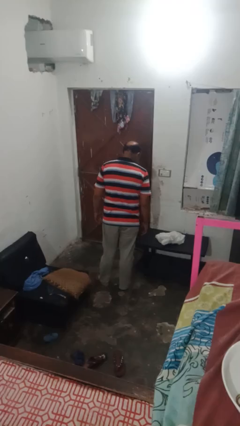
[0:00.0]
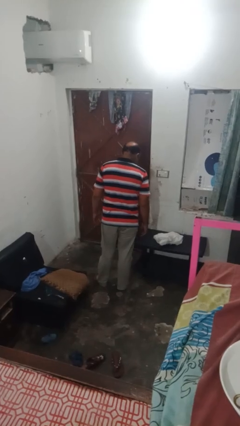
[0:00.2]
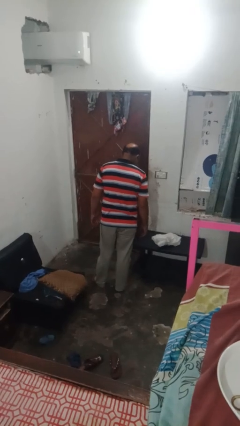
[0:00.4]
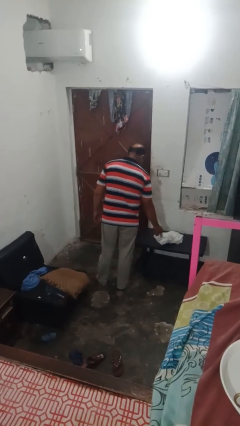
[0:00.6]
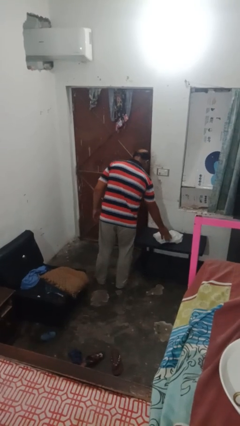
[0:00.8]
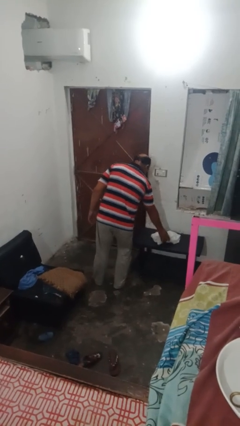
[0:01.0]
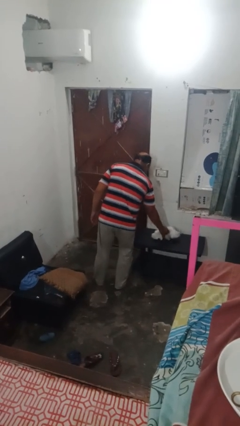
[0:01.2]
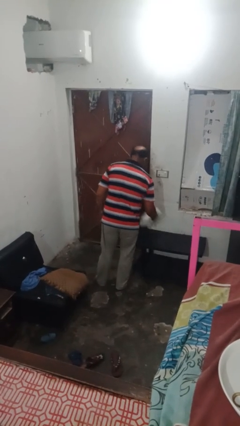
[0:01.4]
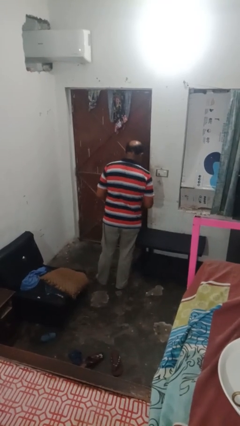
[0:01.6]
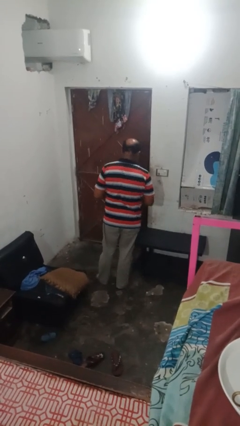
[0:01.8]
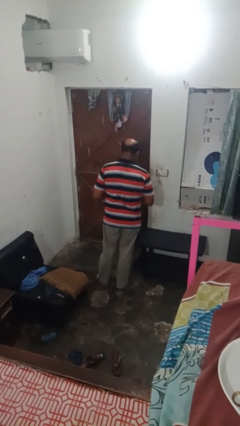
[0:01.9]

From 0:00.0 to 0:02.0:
person picks up object from table

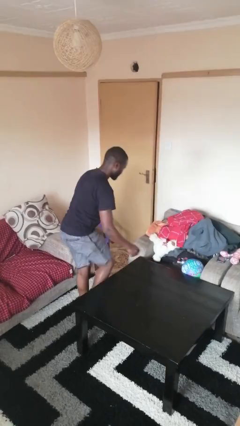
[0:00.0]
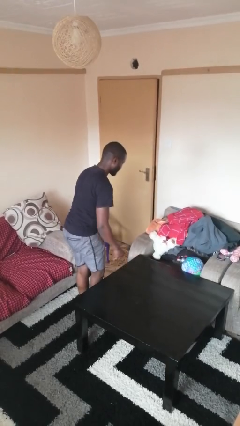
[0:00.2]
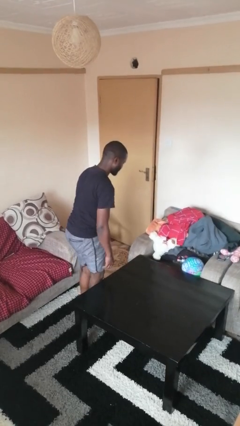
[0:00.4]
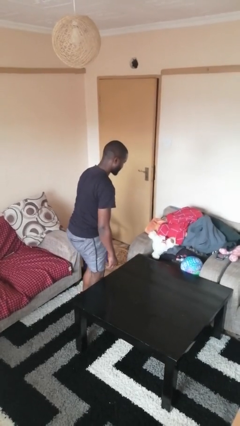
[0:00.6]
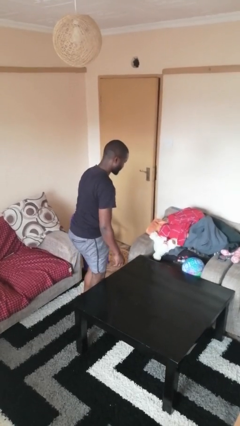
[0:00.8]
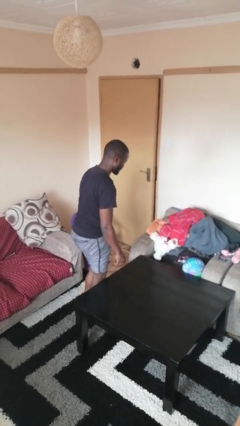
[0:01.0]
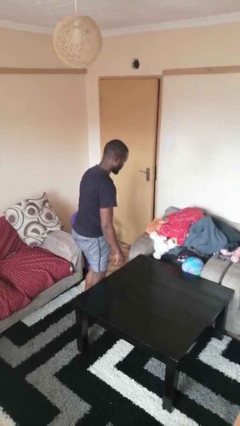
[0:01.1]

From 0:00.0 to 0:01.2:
person climbs off table

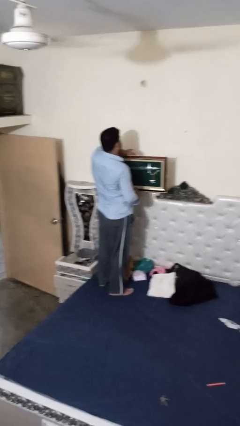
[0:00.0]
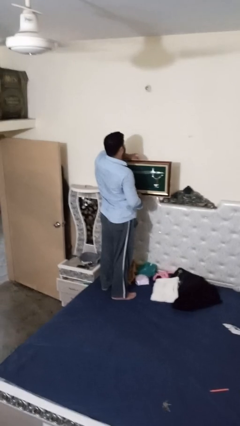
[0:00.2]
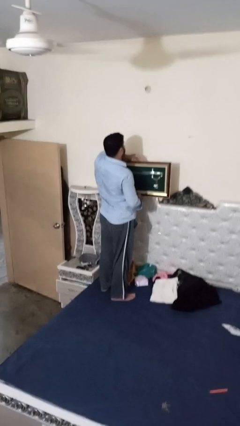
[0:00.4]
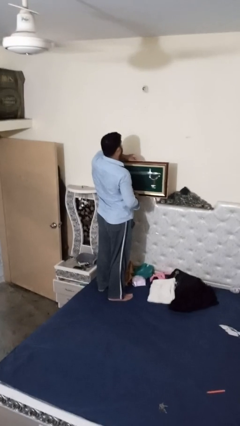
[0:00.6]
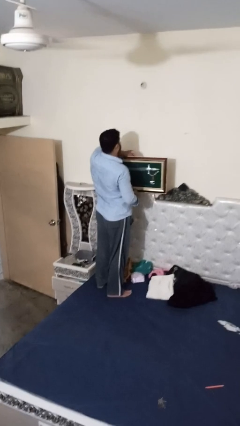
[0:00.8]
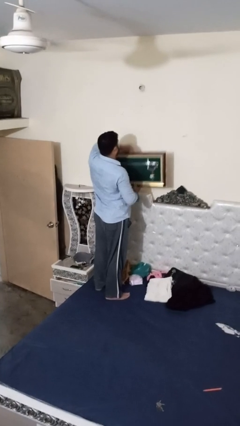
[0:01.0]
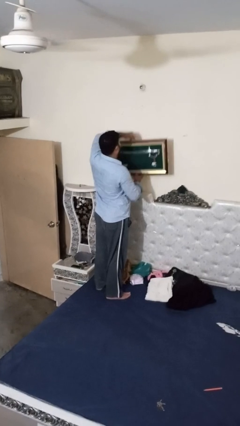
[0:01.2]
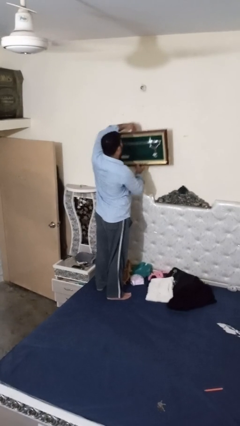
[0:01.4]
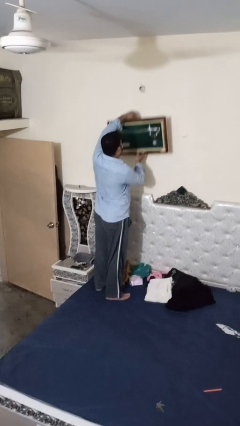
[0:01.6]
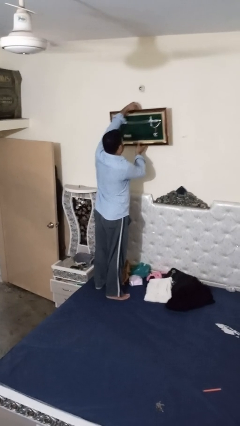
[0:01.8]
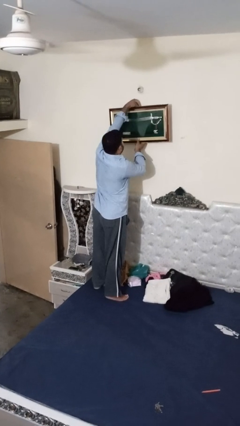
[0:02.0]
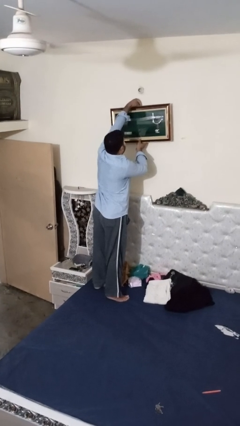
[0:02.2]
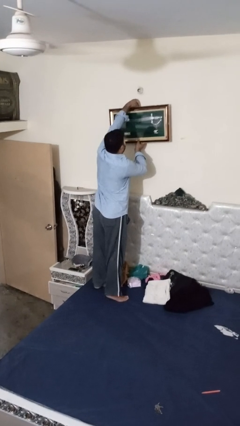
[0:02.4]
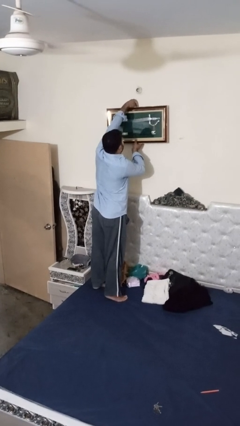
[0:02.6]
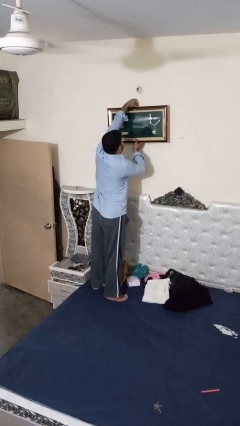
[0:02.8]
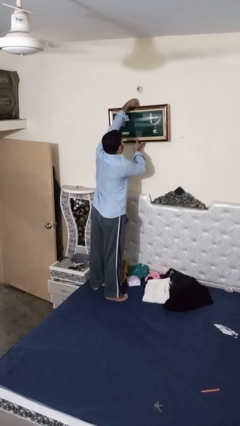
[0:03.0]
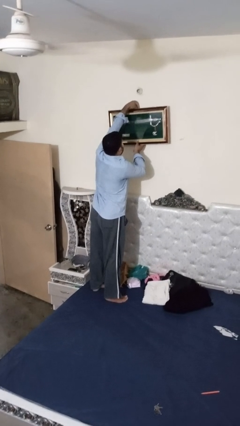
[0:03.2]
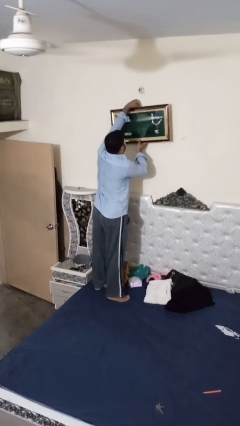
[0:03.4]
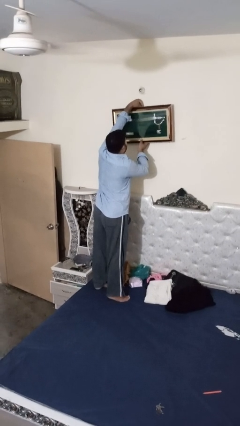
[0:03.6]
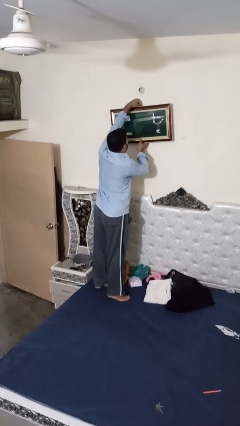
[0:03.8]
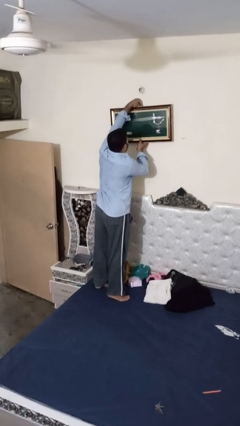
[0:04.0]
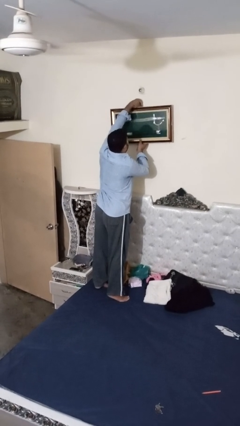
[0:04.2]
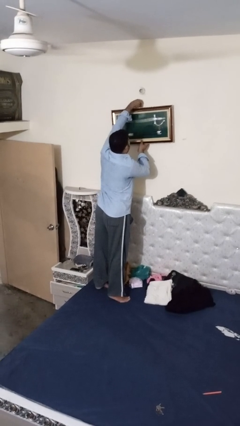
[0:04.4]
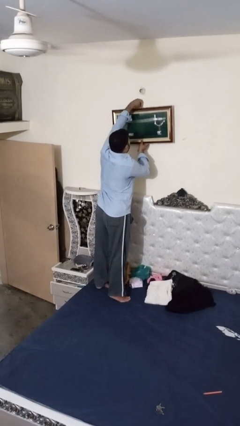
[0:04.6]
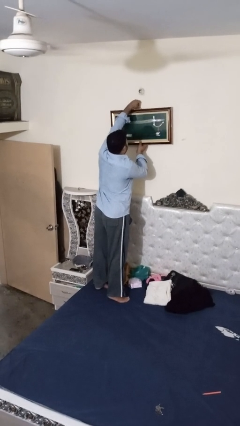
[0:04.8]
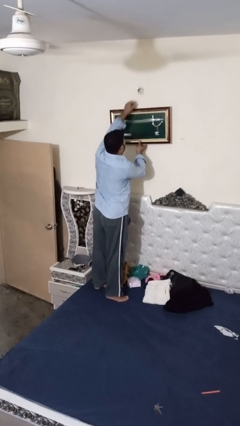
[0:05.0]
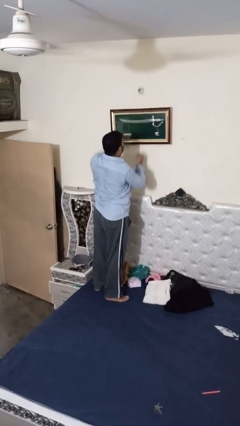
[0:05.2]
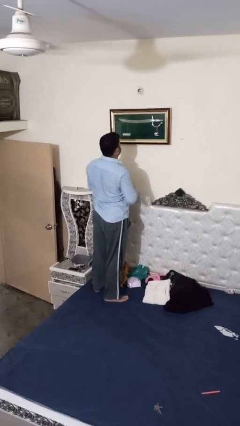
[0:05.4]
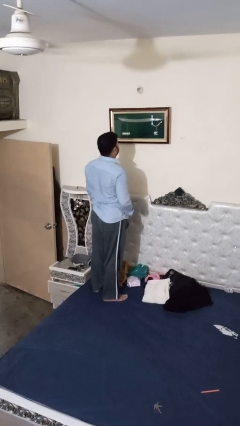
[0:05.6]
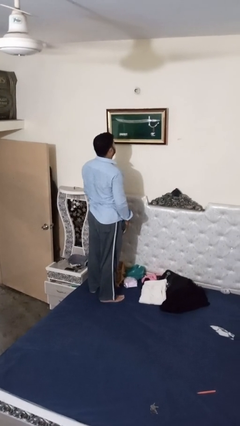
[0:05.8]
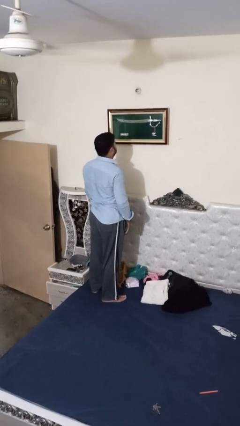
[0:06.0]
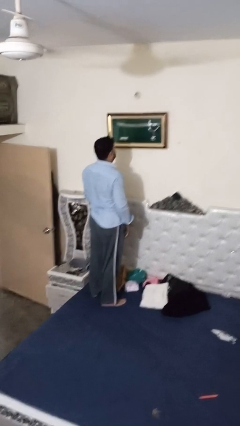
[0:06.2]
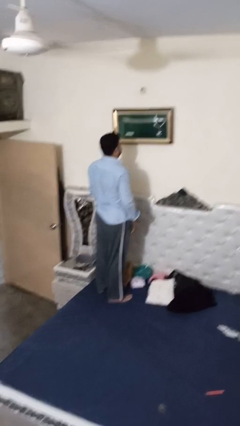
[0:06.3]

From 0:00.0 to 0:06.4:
person puts up picture frame

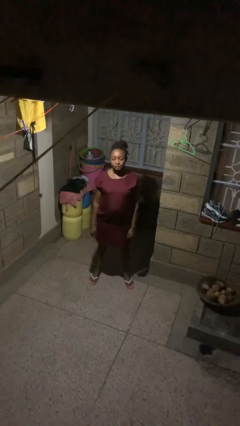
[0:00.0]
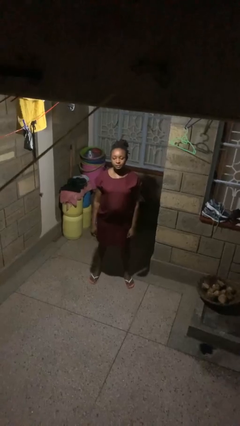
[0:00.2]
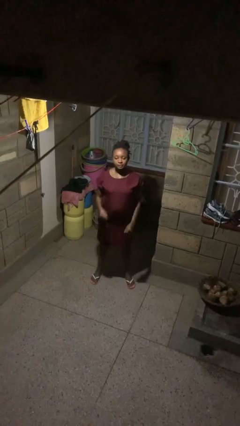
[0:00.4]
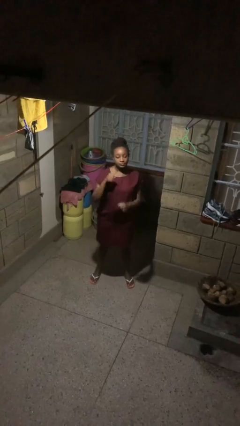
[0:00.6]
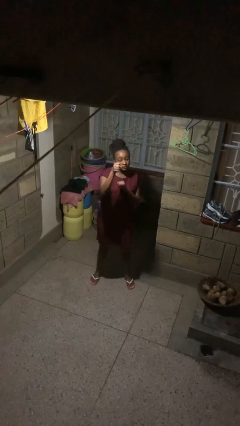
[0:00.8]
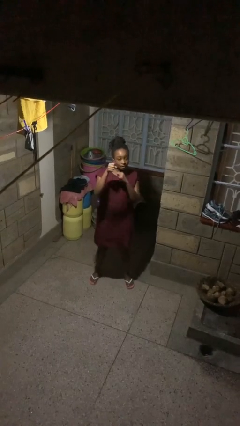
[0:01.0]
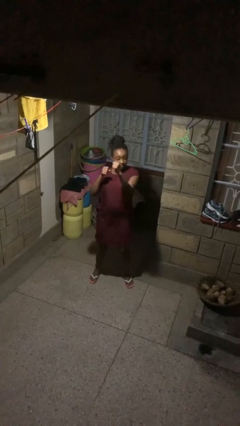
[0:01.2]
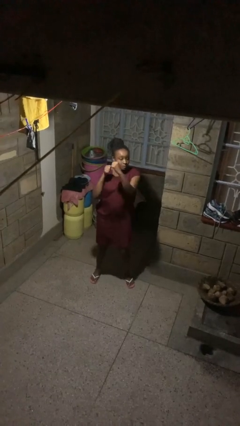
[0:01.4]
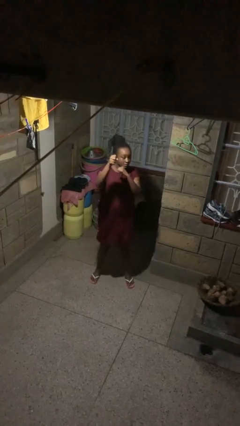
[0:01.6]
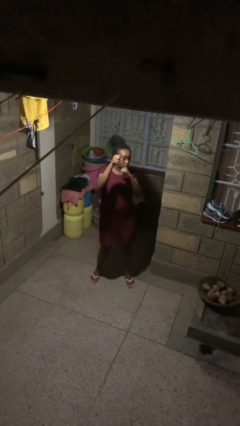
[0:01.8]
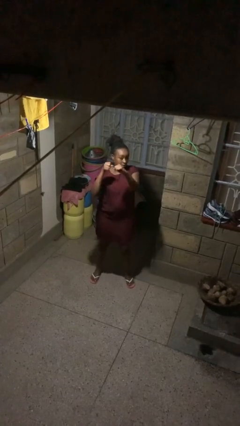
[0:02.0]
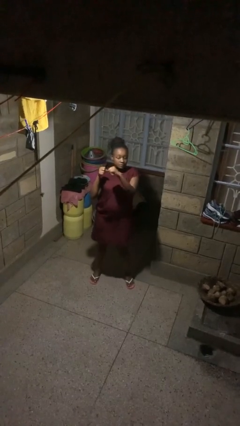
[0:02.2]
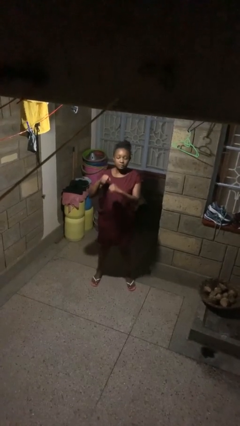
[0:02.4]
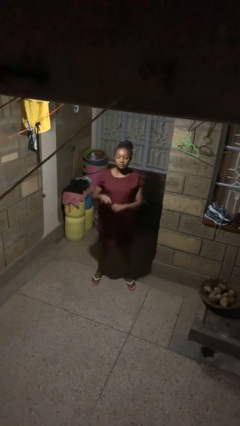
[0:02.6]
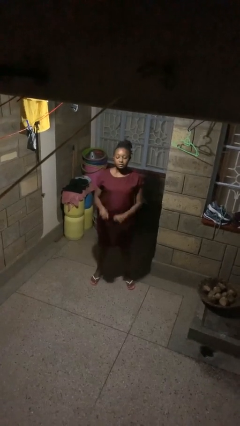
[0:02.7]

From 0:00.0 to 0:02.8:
person punches

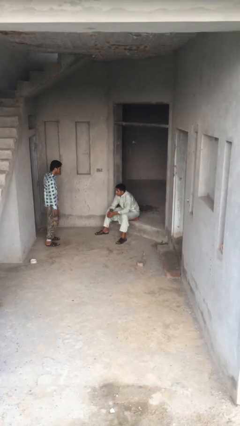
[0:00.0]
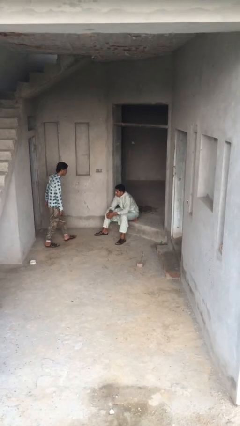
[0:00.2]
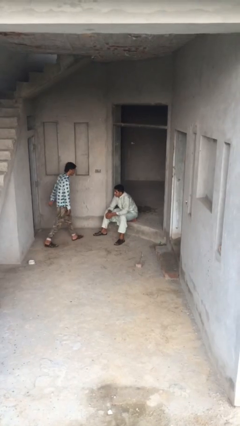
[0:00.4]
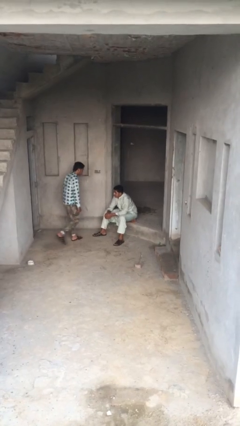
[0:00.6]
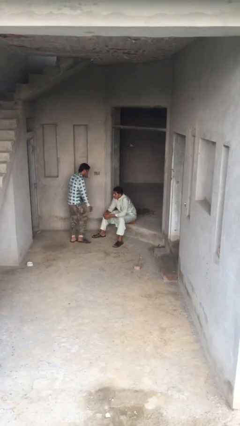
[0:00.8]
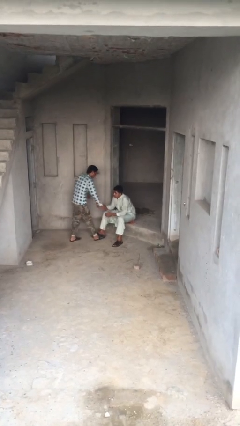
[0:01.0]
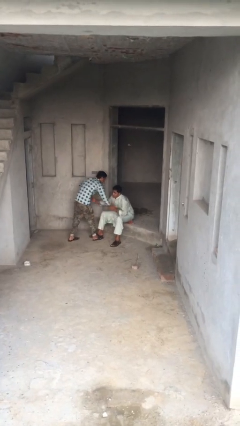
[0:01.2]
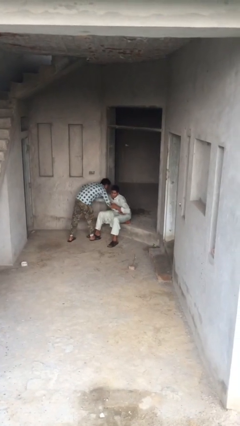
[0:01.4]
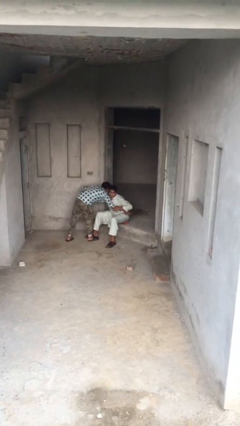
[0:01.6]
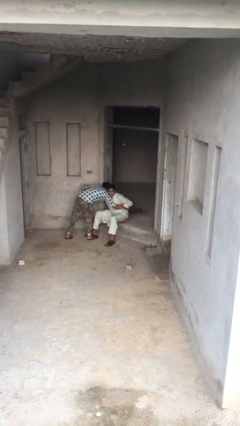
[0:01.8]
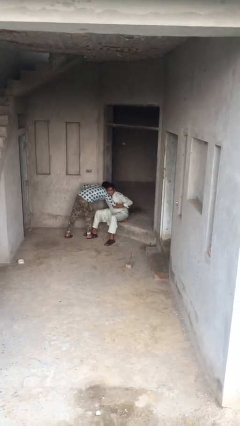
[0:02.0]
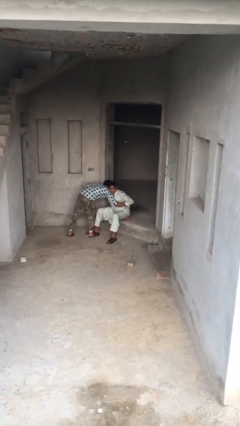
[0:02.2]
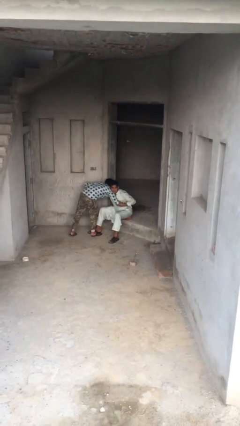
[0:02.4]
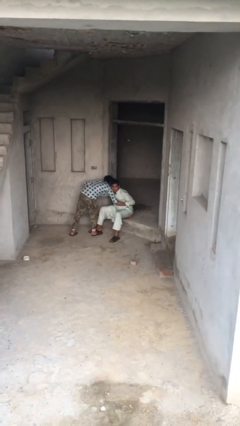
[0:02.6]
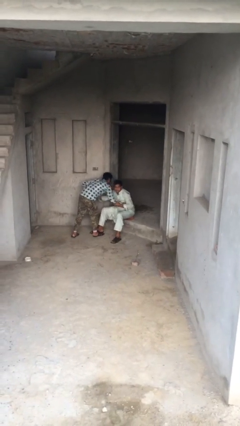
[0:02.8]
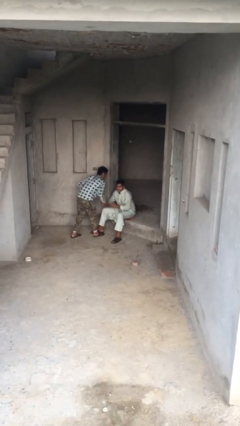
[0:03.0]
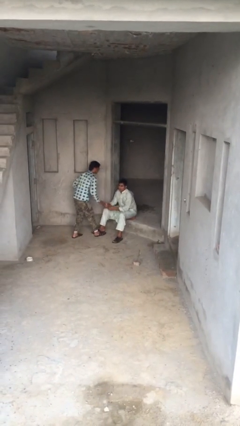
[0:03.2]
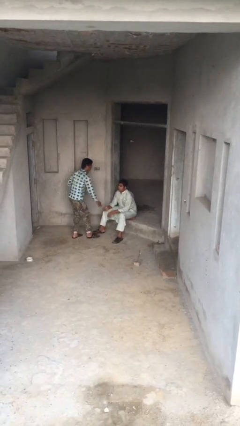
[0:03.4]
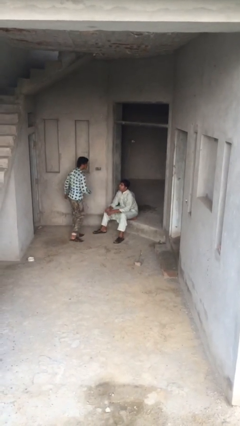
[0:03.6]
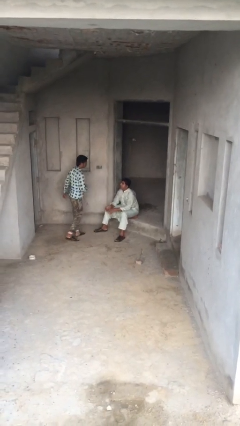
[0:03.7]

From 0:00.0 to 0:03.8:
person embraces person

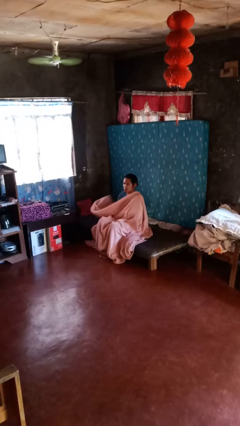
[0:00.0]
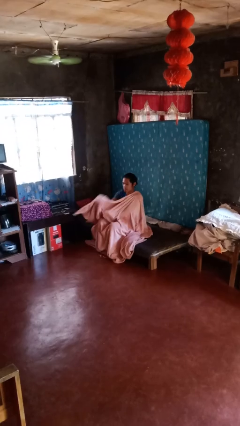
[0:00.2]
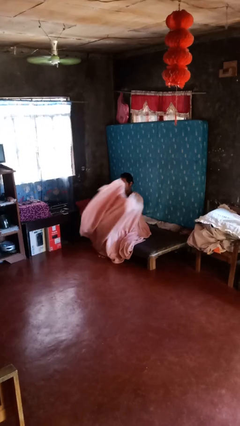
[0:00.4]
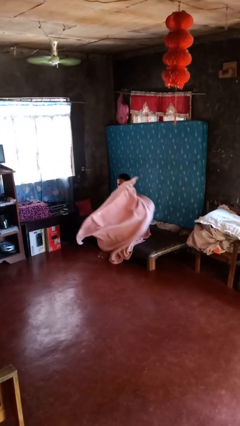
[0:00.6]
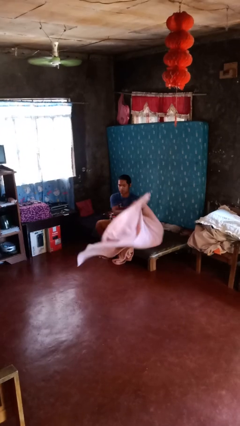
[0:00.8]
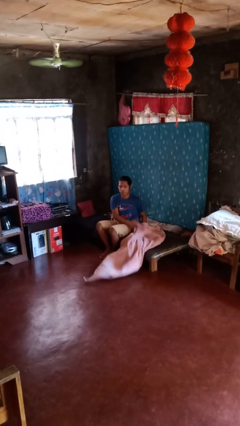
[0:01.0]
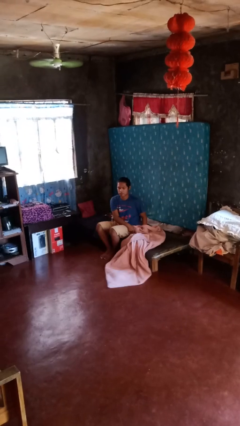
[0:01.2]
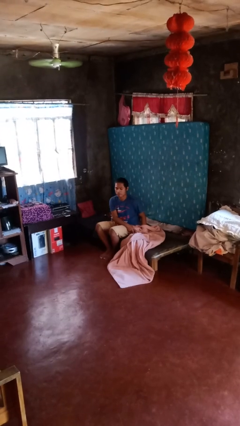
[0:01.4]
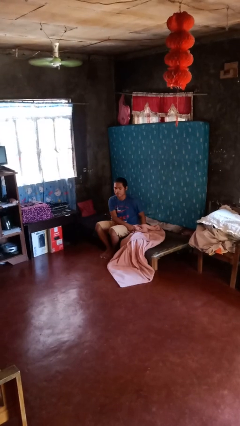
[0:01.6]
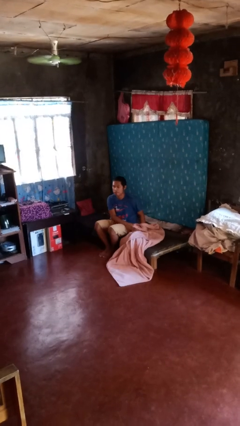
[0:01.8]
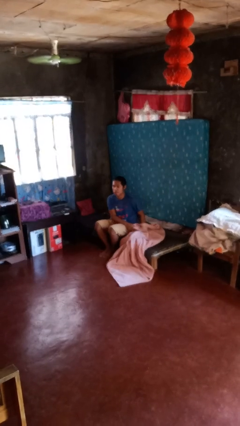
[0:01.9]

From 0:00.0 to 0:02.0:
person uncovers with blanket
